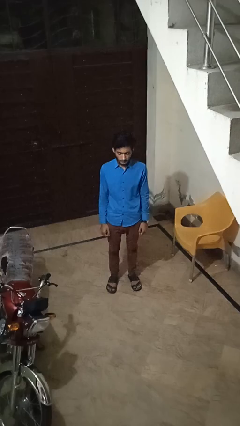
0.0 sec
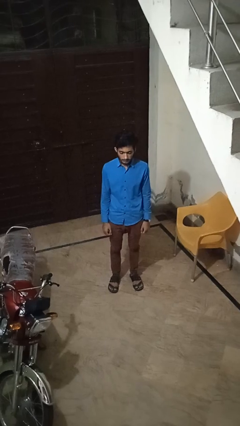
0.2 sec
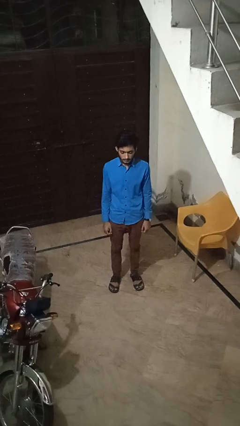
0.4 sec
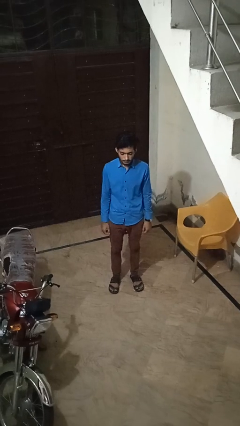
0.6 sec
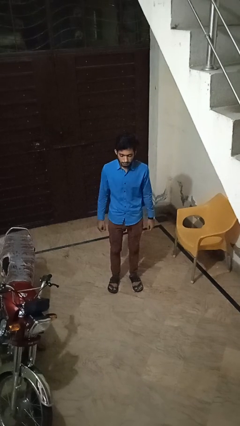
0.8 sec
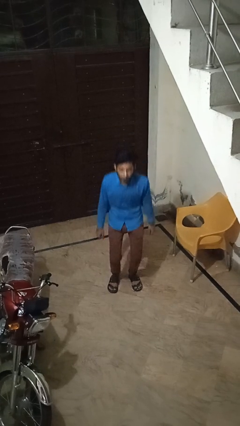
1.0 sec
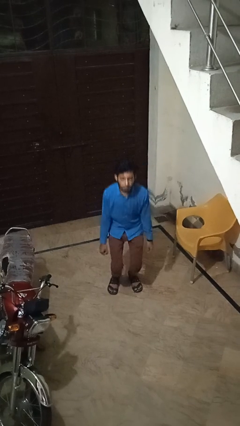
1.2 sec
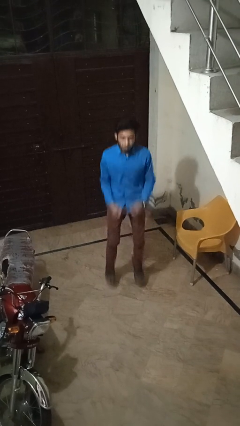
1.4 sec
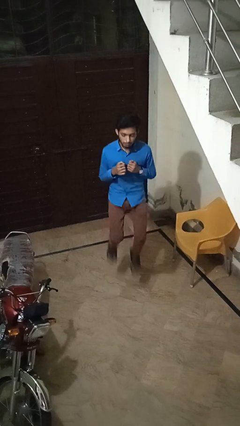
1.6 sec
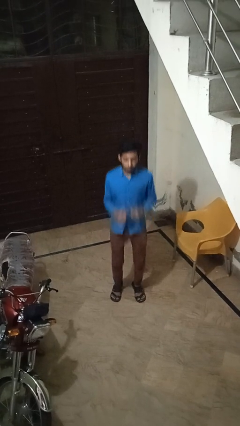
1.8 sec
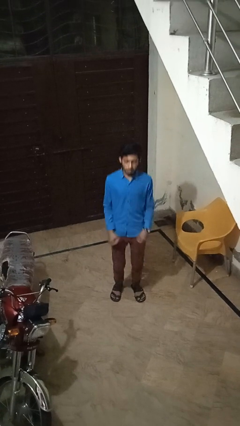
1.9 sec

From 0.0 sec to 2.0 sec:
person jumps

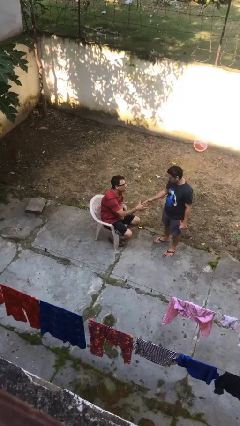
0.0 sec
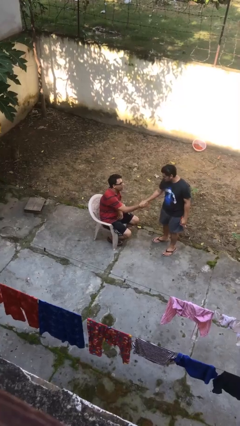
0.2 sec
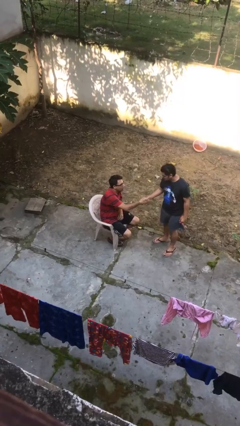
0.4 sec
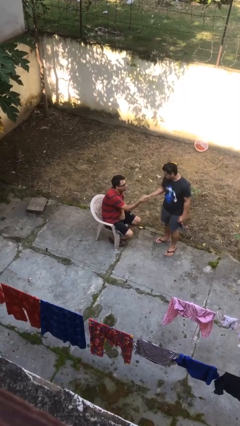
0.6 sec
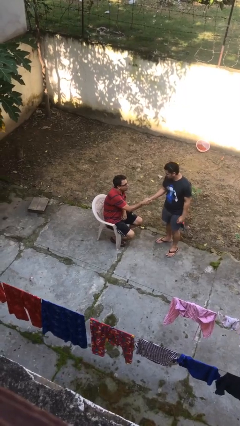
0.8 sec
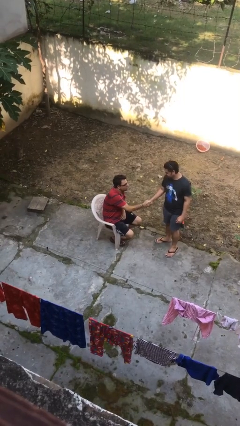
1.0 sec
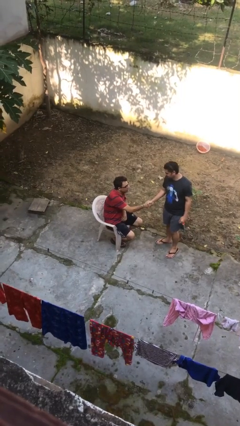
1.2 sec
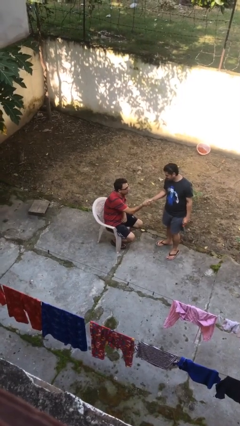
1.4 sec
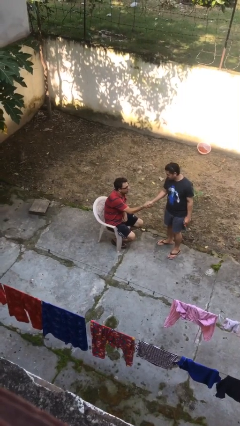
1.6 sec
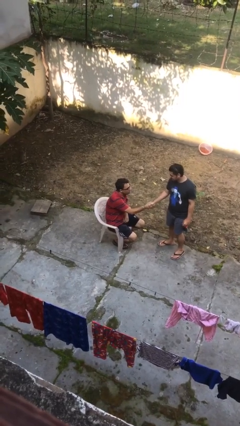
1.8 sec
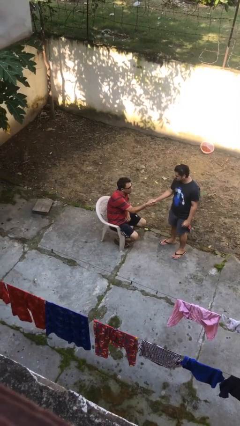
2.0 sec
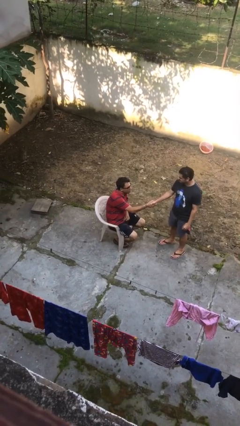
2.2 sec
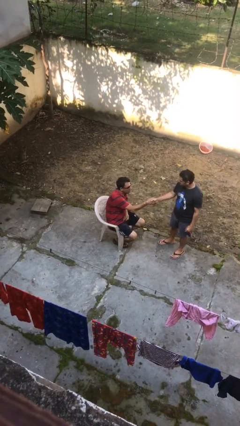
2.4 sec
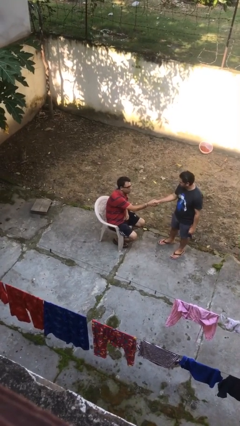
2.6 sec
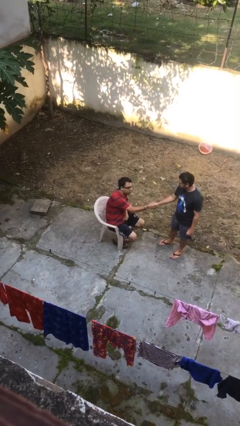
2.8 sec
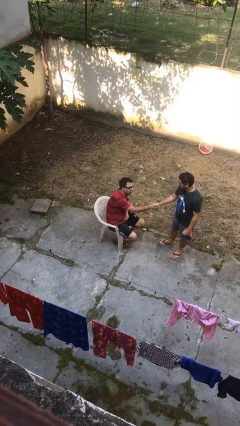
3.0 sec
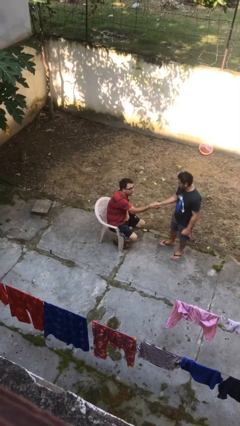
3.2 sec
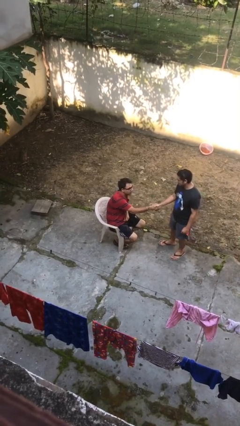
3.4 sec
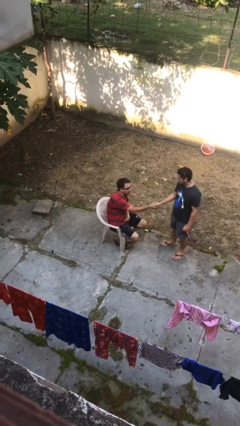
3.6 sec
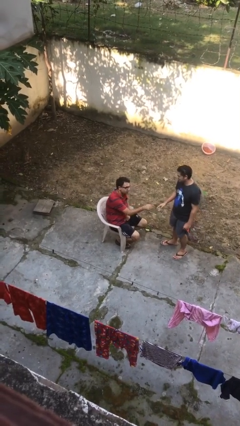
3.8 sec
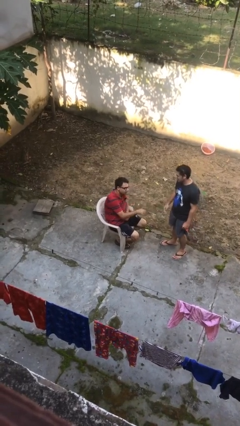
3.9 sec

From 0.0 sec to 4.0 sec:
person shakes hand

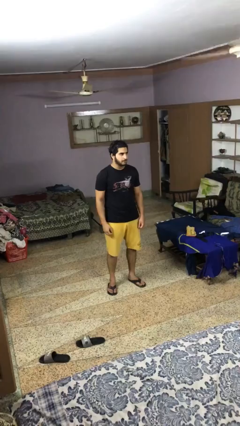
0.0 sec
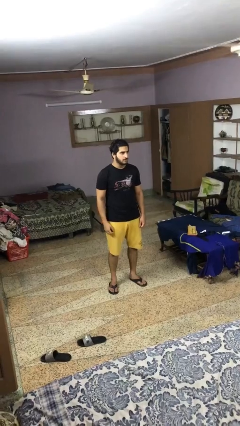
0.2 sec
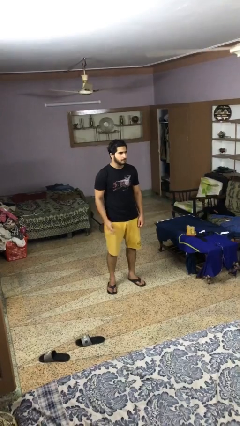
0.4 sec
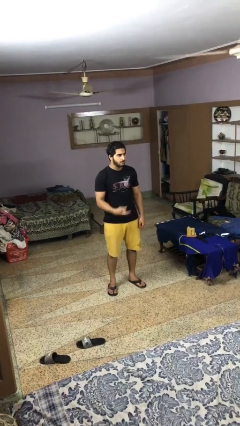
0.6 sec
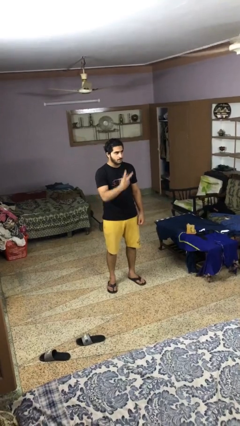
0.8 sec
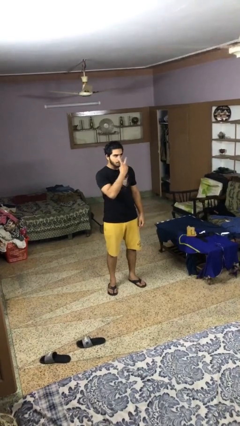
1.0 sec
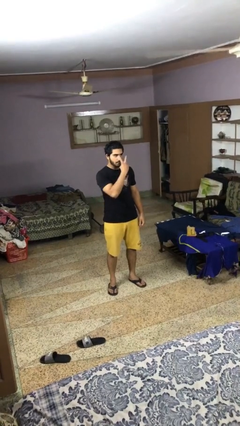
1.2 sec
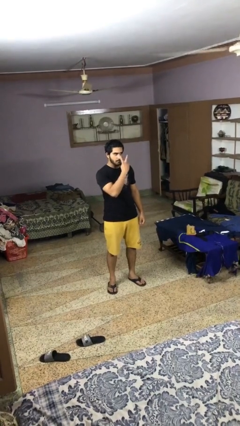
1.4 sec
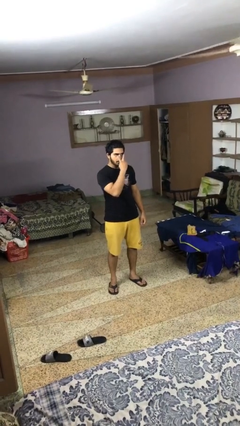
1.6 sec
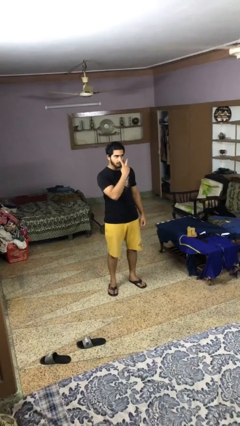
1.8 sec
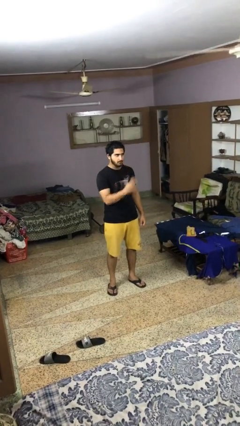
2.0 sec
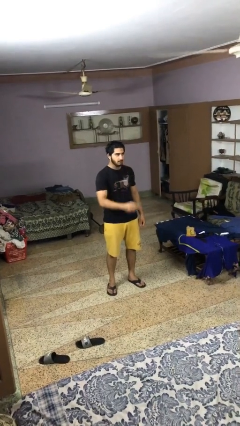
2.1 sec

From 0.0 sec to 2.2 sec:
person gestures watch closely

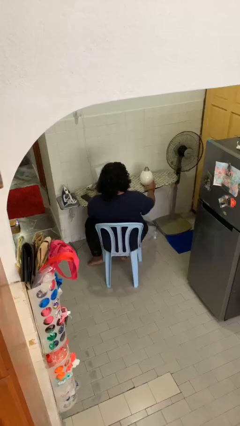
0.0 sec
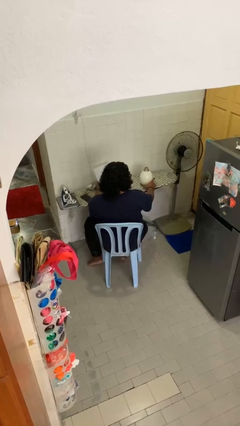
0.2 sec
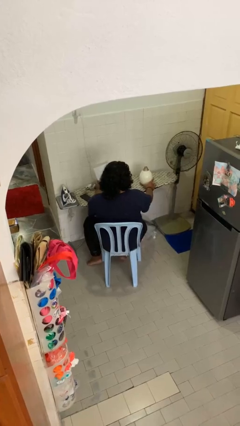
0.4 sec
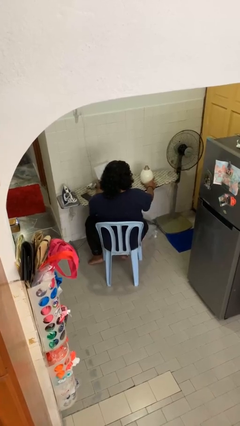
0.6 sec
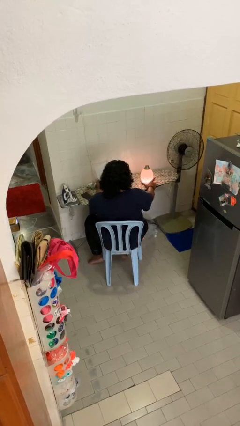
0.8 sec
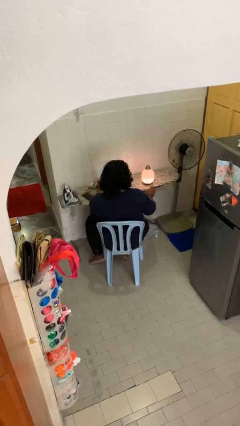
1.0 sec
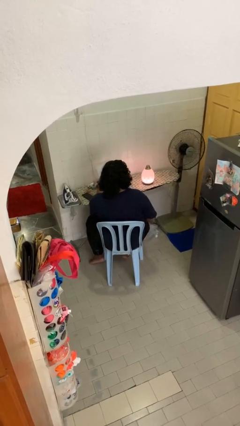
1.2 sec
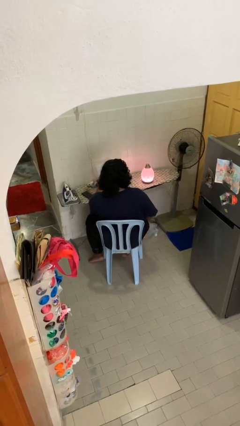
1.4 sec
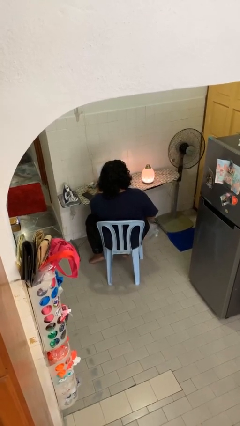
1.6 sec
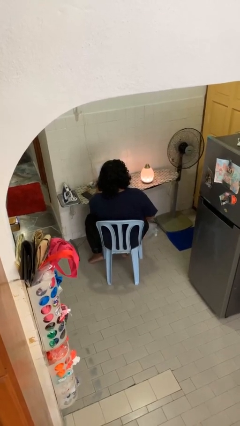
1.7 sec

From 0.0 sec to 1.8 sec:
person turns on lamp

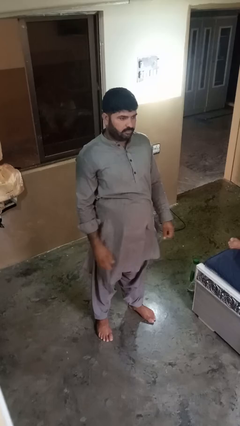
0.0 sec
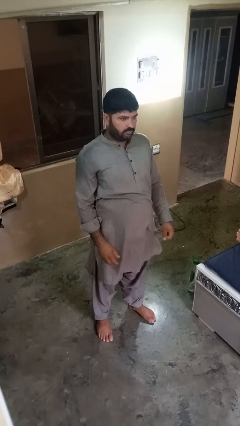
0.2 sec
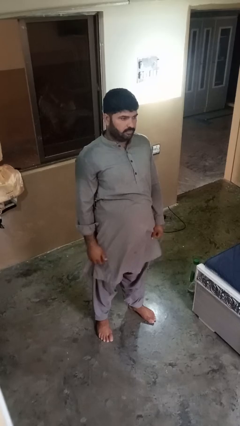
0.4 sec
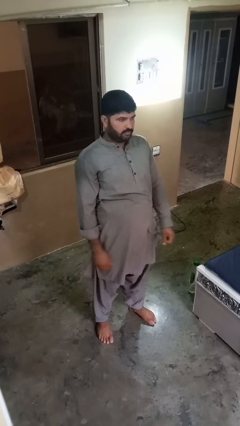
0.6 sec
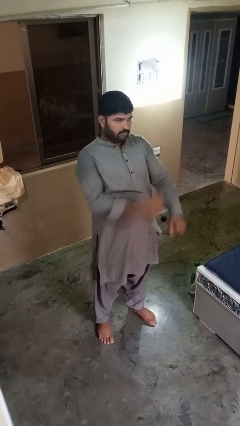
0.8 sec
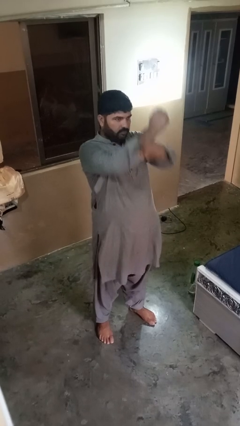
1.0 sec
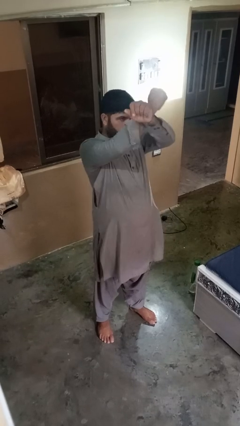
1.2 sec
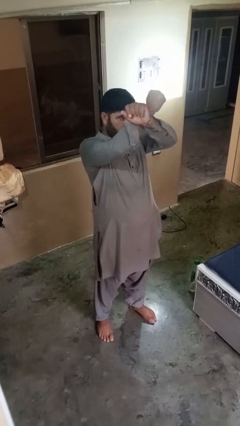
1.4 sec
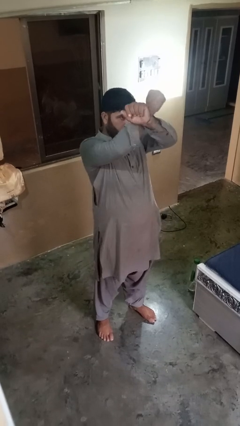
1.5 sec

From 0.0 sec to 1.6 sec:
person gestures arms x

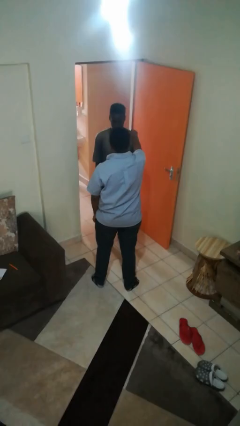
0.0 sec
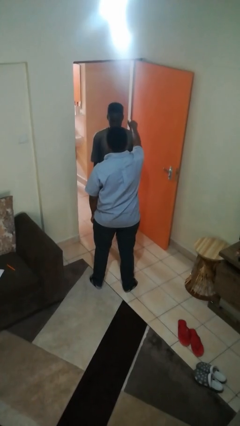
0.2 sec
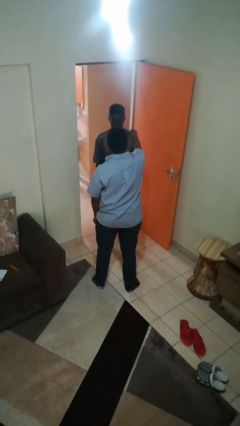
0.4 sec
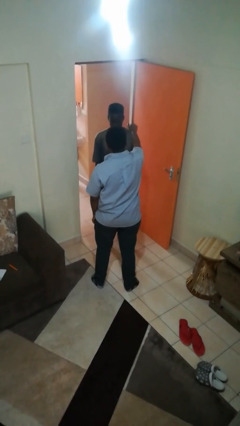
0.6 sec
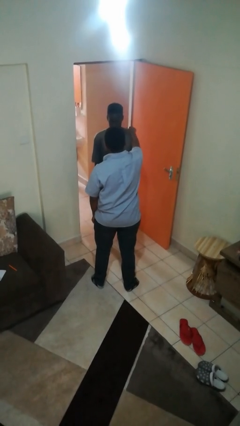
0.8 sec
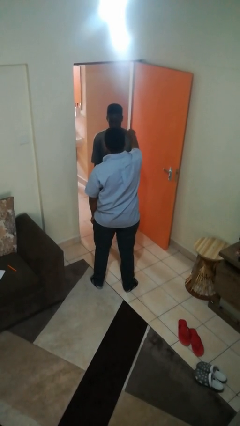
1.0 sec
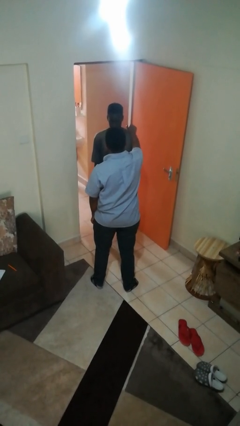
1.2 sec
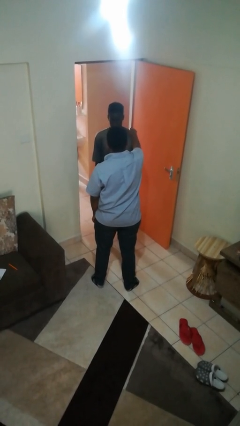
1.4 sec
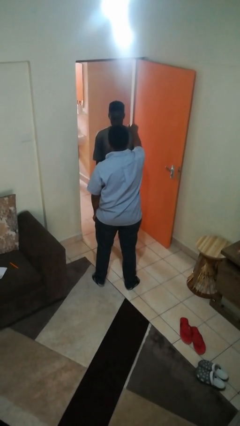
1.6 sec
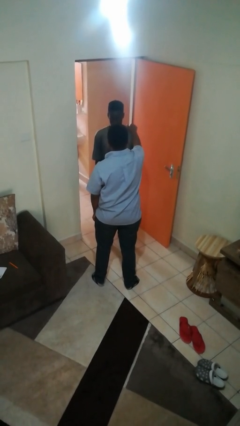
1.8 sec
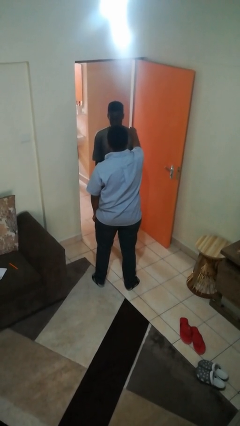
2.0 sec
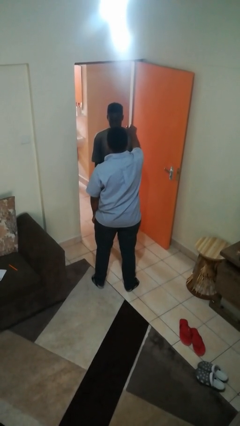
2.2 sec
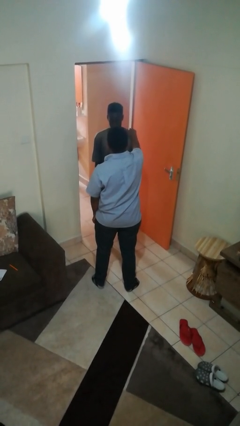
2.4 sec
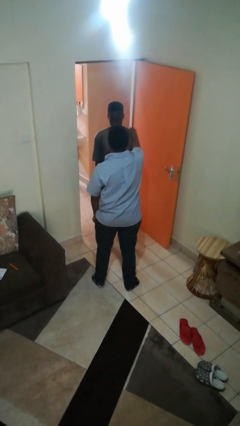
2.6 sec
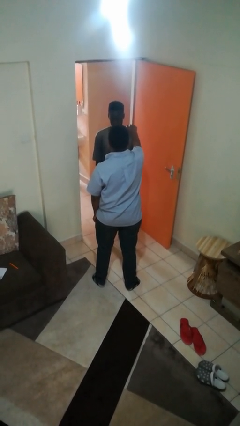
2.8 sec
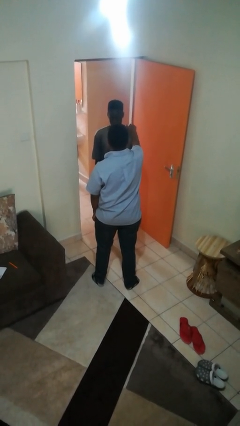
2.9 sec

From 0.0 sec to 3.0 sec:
person pounds shoulders of person

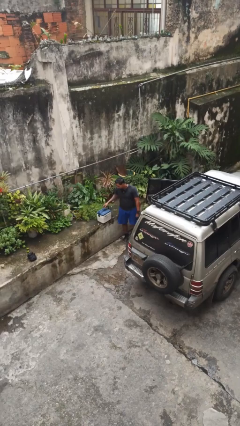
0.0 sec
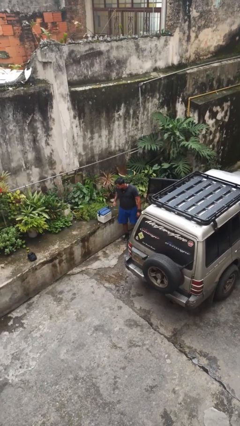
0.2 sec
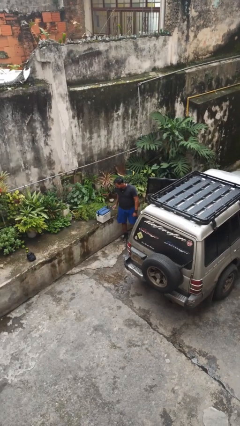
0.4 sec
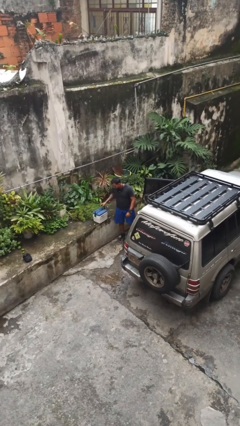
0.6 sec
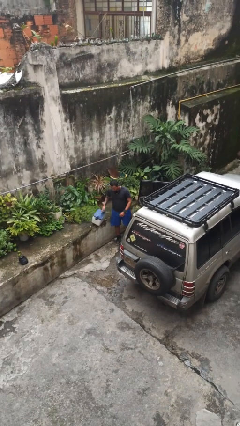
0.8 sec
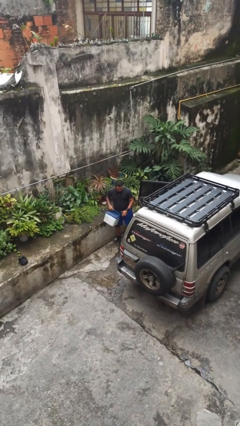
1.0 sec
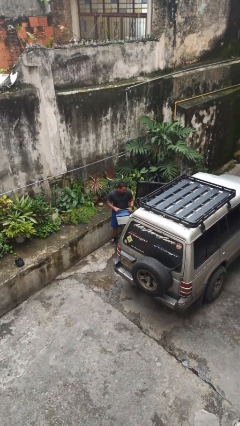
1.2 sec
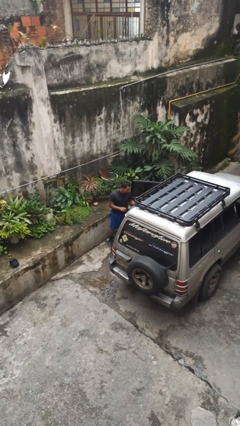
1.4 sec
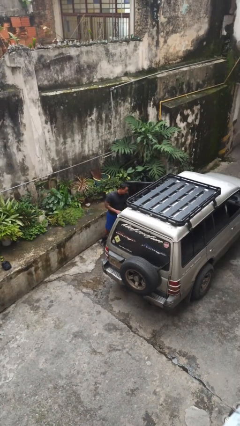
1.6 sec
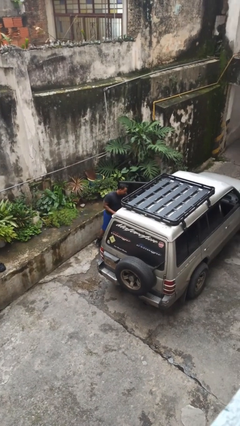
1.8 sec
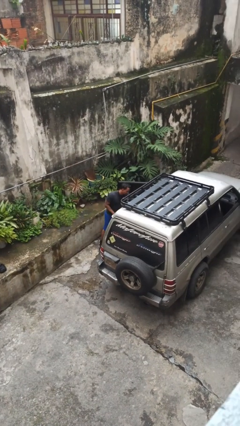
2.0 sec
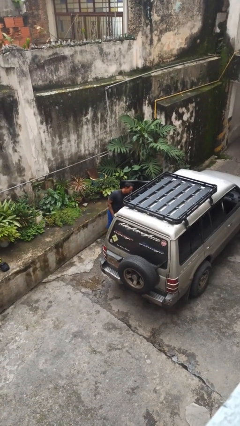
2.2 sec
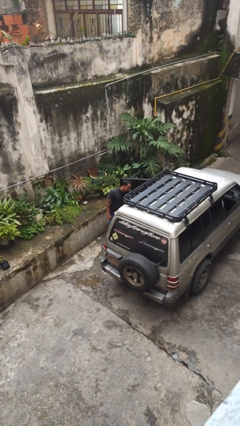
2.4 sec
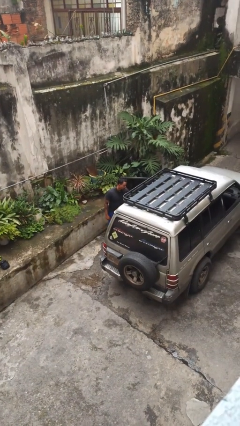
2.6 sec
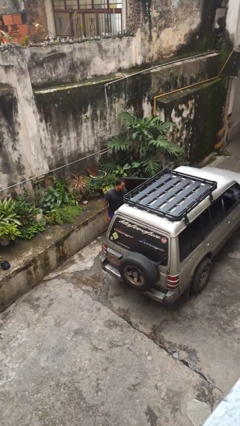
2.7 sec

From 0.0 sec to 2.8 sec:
person loads car
